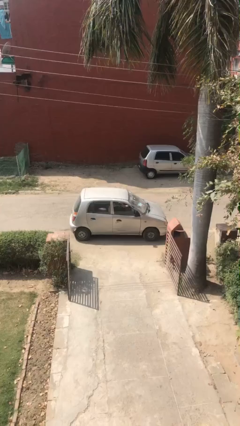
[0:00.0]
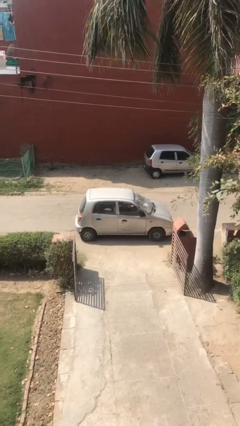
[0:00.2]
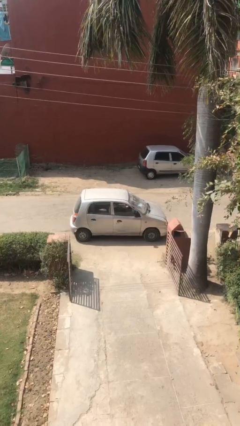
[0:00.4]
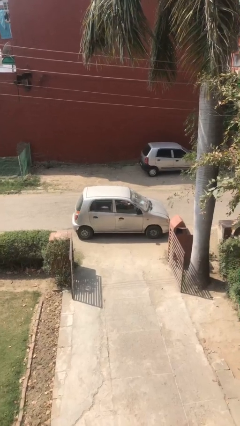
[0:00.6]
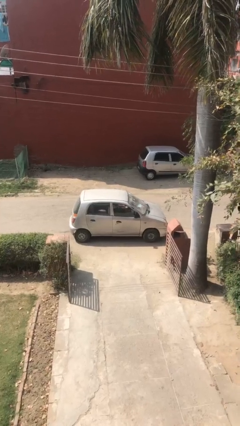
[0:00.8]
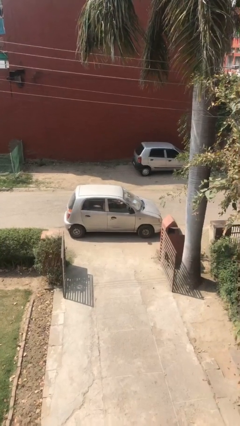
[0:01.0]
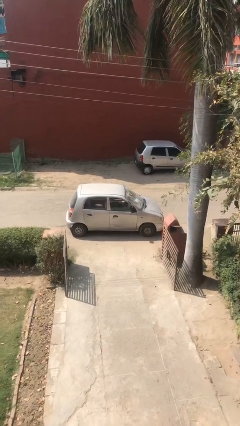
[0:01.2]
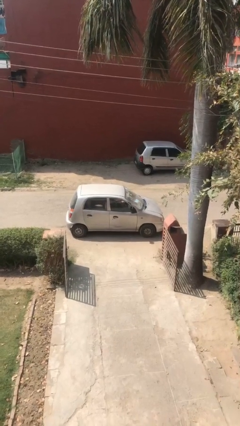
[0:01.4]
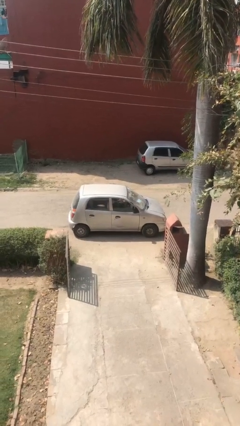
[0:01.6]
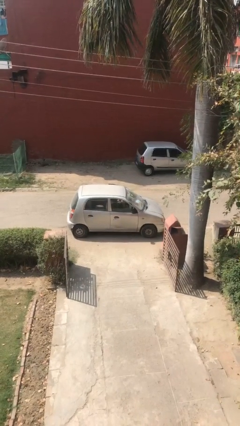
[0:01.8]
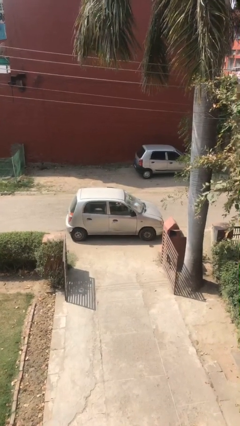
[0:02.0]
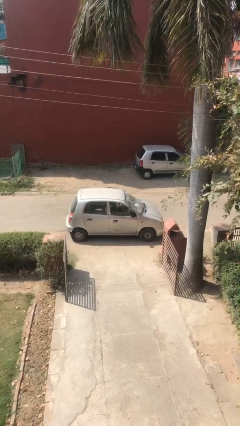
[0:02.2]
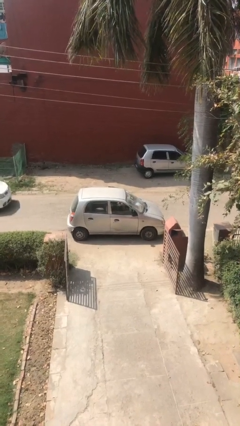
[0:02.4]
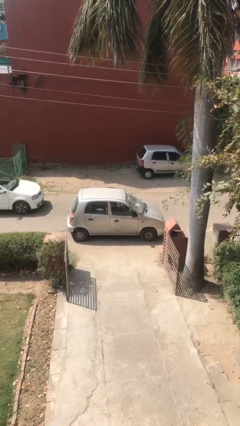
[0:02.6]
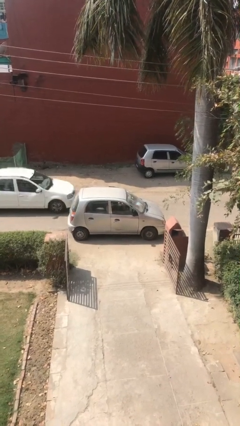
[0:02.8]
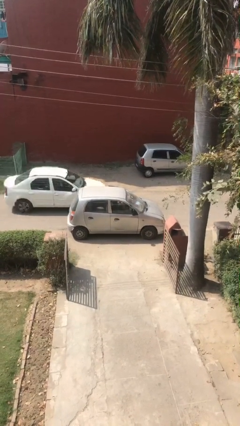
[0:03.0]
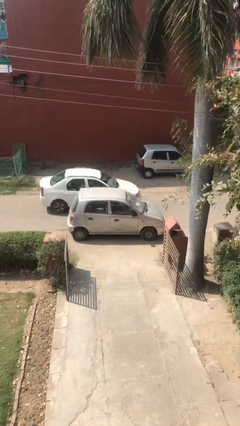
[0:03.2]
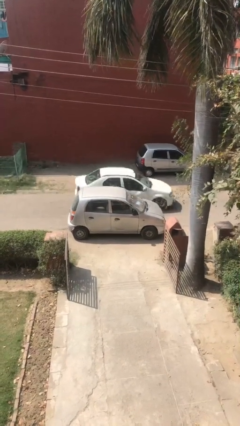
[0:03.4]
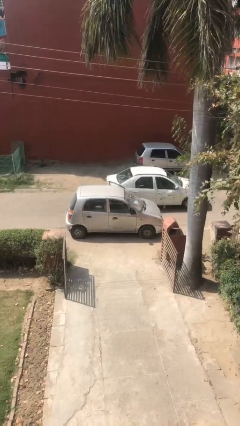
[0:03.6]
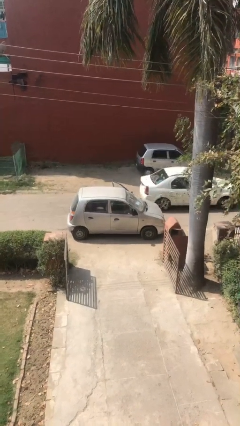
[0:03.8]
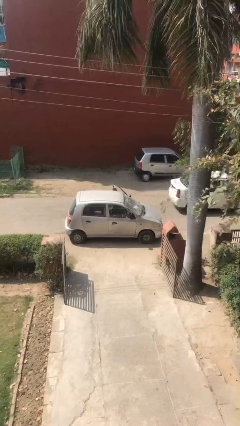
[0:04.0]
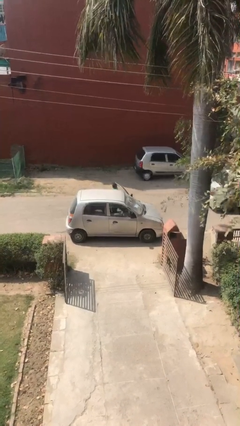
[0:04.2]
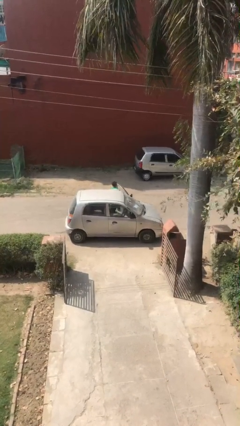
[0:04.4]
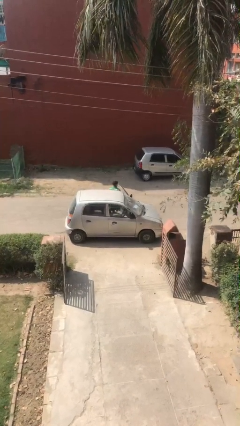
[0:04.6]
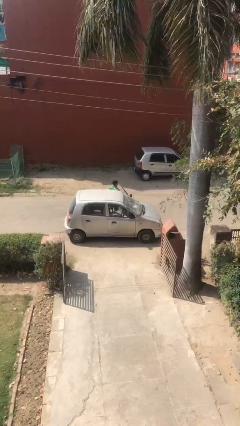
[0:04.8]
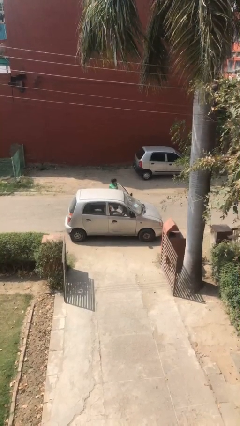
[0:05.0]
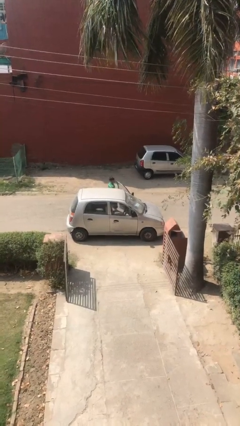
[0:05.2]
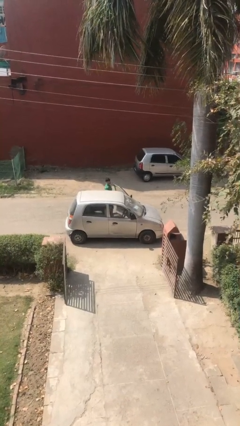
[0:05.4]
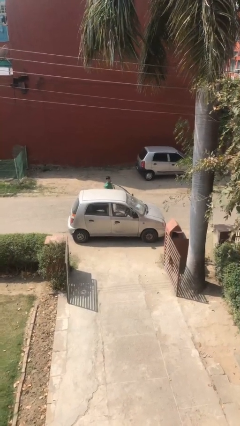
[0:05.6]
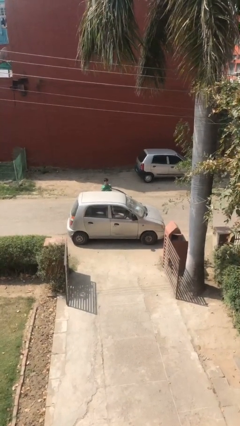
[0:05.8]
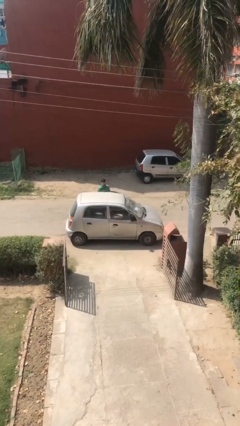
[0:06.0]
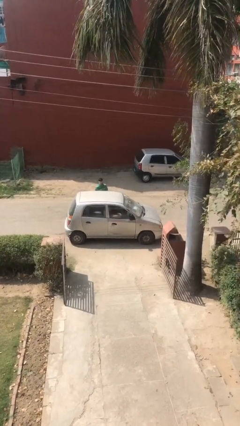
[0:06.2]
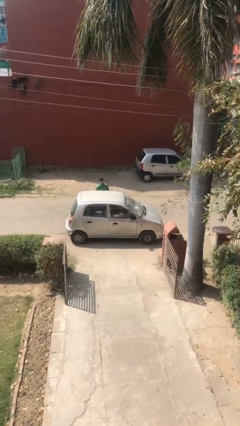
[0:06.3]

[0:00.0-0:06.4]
car drops off person

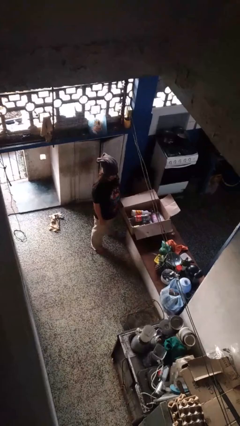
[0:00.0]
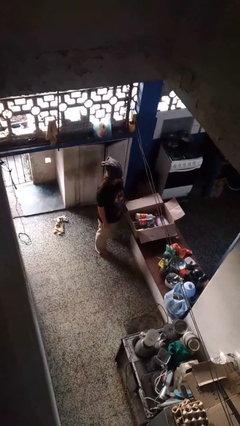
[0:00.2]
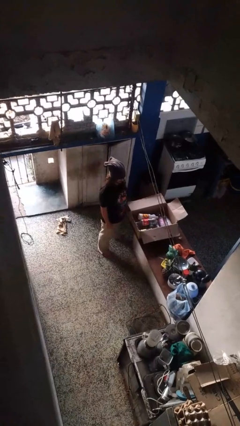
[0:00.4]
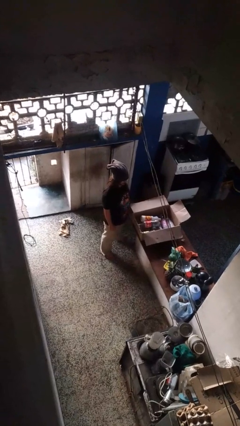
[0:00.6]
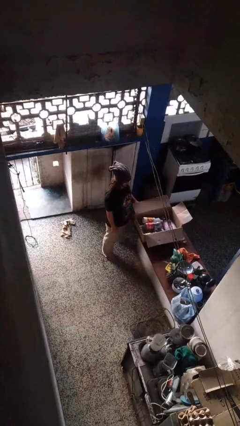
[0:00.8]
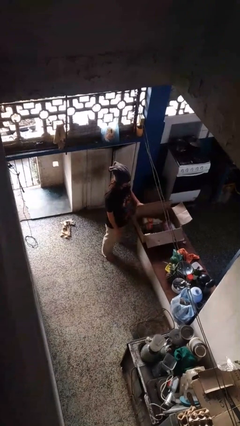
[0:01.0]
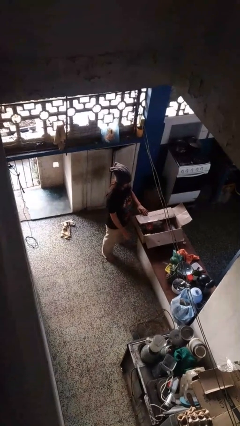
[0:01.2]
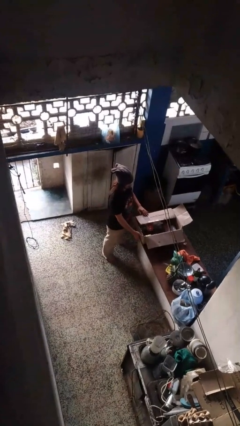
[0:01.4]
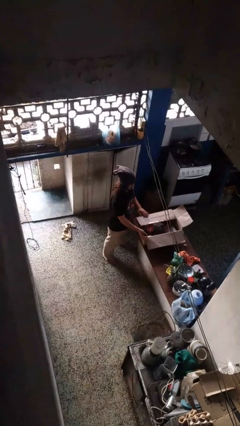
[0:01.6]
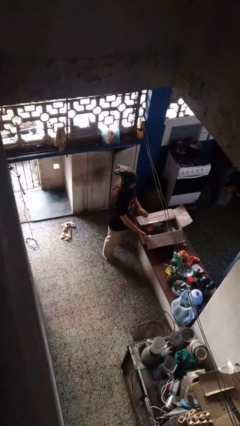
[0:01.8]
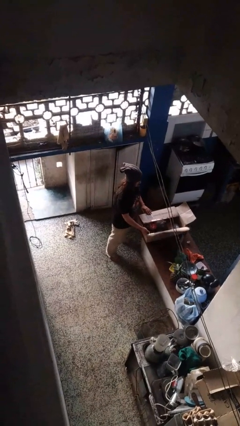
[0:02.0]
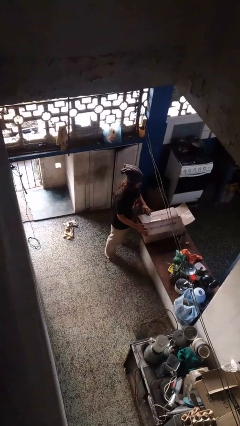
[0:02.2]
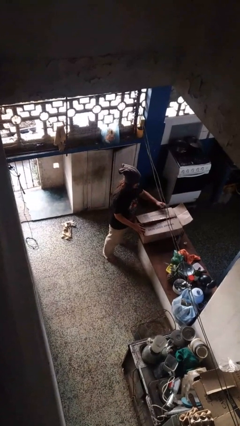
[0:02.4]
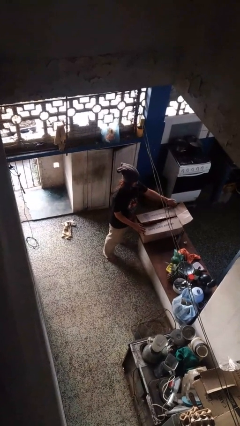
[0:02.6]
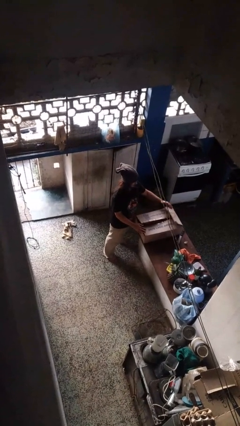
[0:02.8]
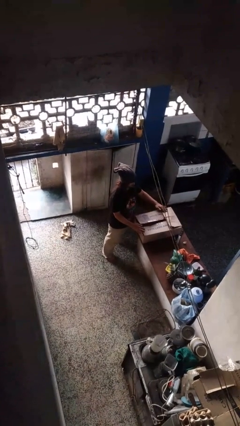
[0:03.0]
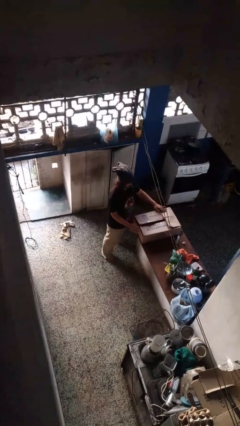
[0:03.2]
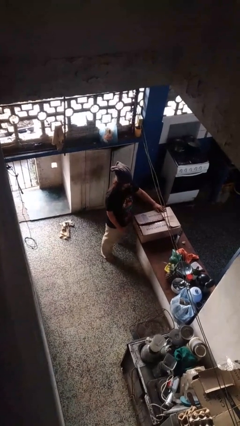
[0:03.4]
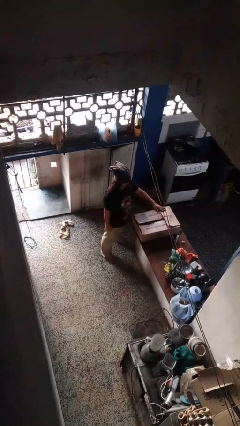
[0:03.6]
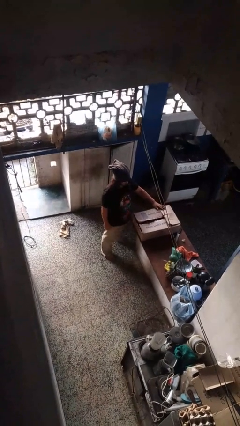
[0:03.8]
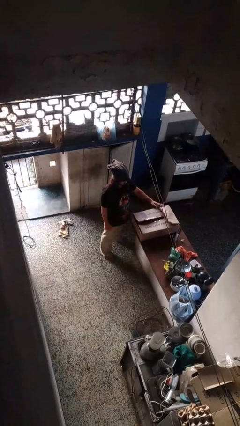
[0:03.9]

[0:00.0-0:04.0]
person closes box

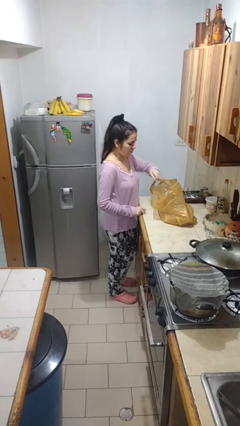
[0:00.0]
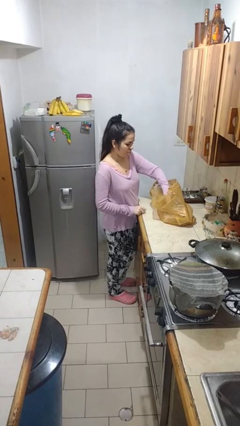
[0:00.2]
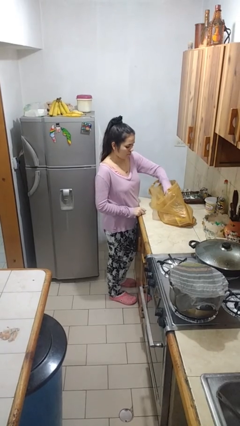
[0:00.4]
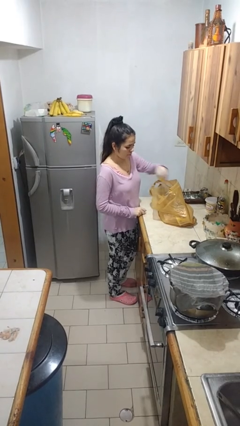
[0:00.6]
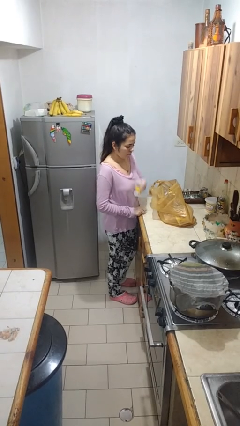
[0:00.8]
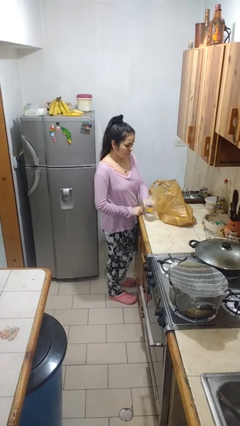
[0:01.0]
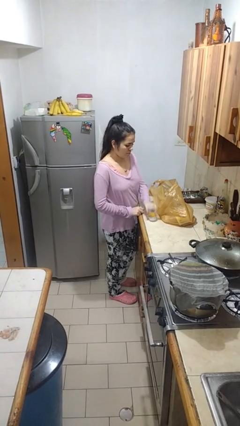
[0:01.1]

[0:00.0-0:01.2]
person takes object from bag

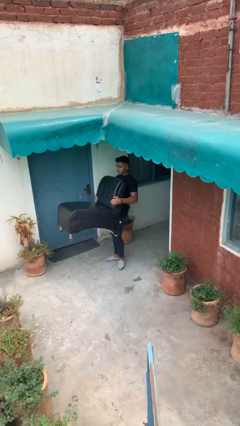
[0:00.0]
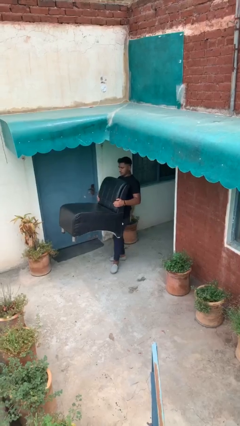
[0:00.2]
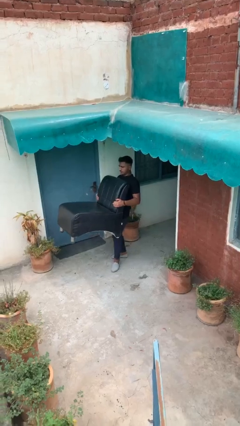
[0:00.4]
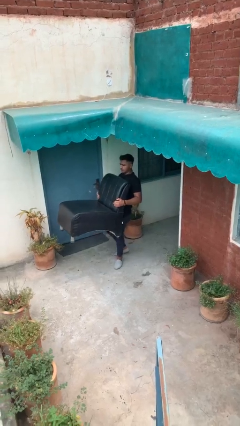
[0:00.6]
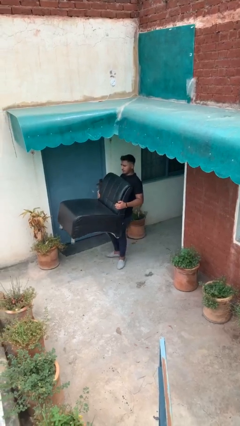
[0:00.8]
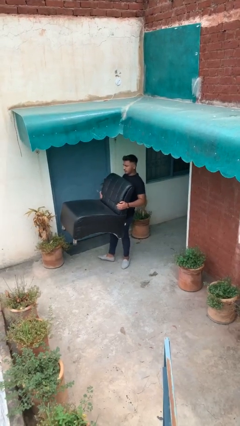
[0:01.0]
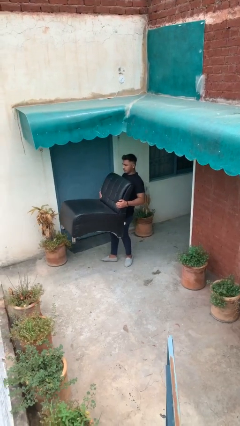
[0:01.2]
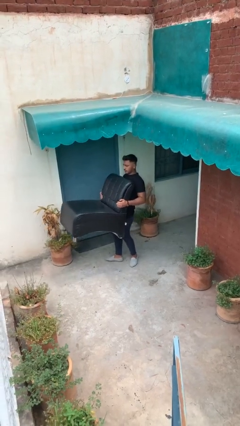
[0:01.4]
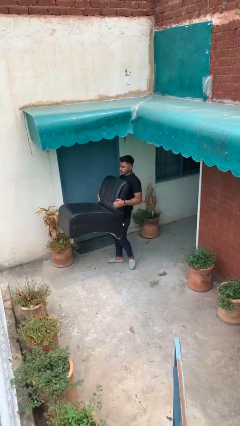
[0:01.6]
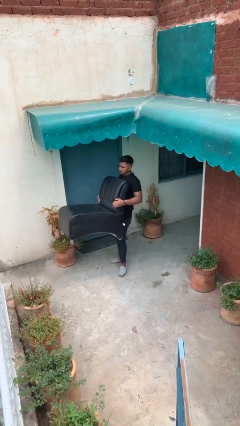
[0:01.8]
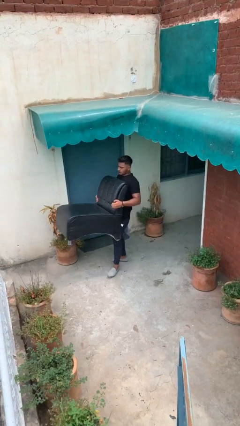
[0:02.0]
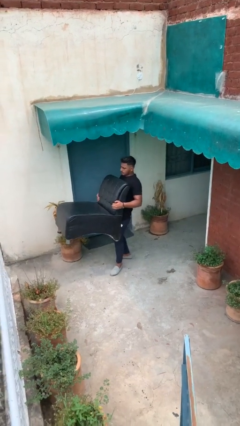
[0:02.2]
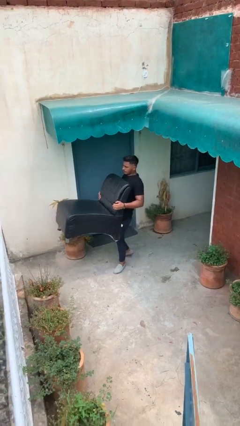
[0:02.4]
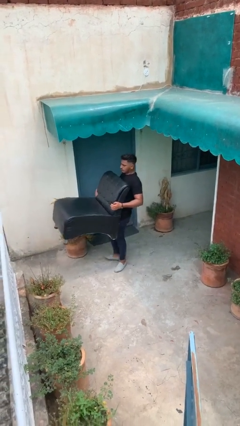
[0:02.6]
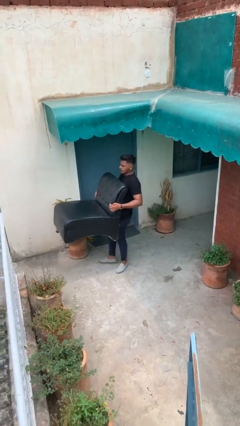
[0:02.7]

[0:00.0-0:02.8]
person carries heavy object

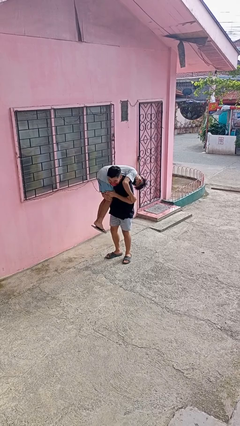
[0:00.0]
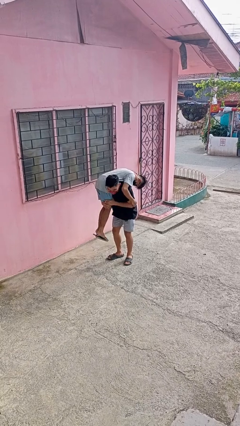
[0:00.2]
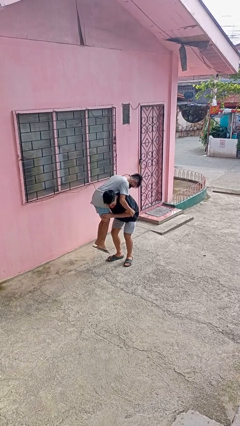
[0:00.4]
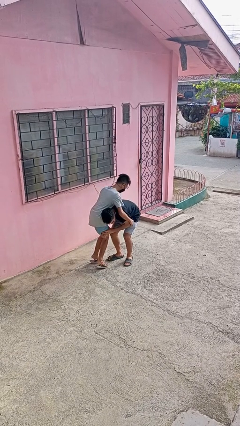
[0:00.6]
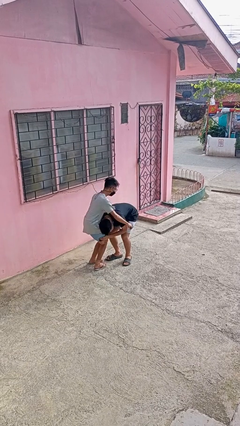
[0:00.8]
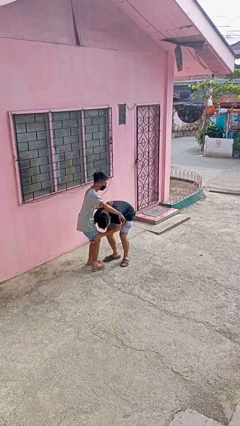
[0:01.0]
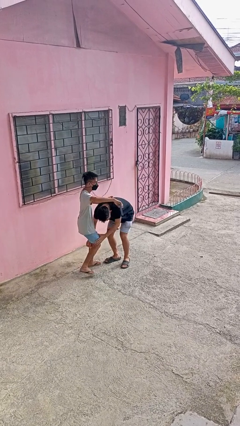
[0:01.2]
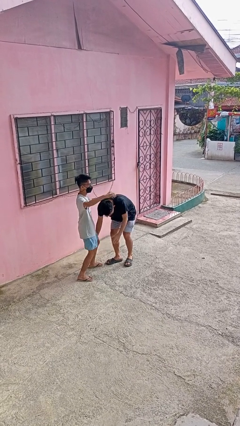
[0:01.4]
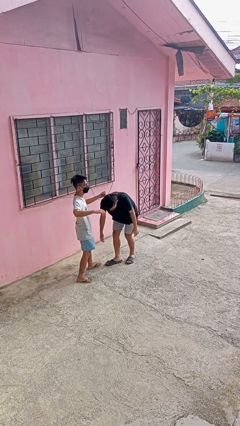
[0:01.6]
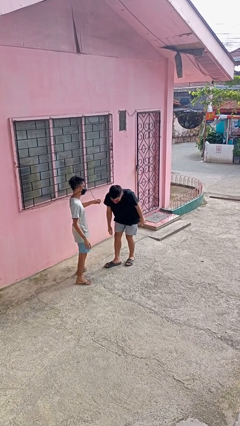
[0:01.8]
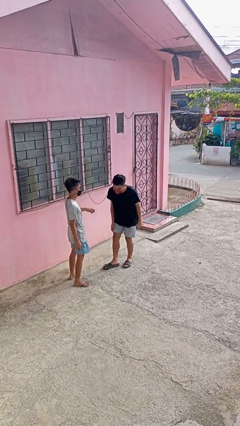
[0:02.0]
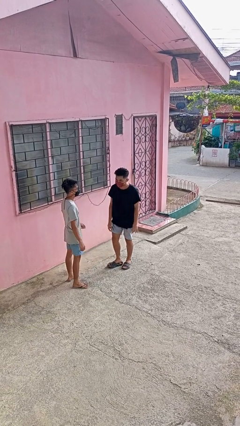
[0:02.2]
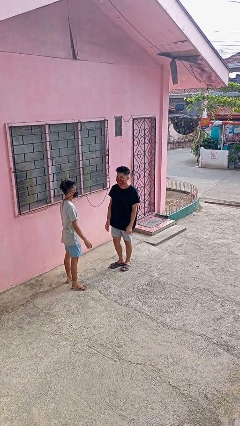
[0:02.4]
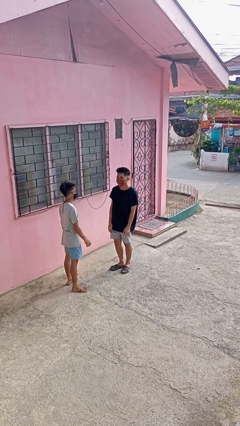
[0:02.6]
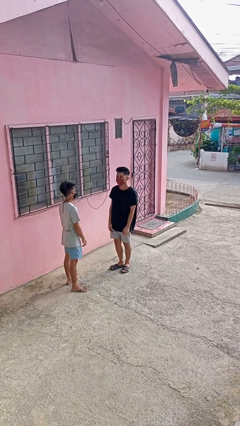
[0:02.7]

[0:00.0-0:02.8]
person puts down person

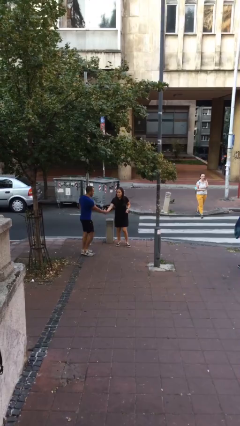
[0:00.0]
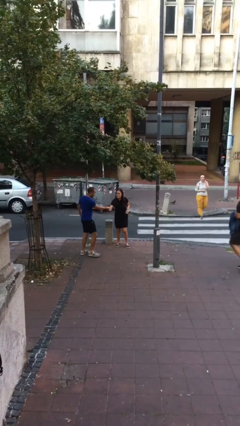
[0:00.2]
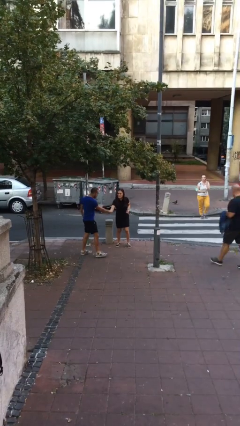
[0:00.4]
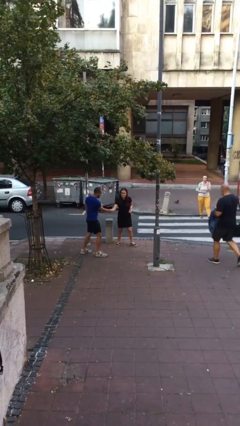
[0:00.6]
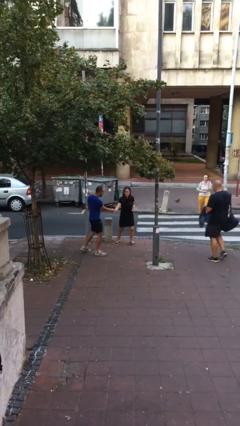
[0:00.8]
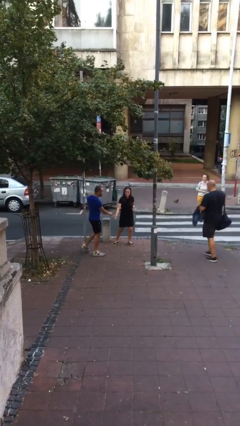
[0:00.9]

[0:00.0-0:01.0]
person shakes hand
